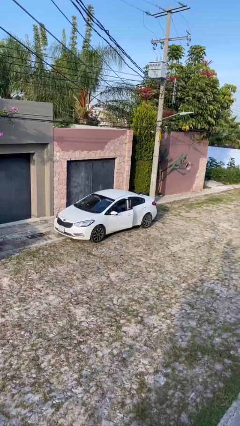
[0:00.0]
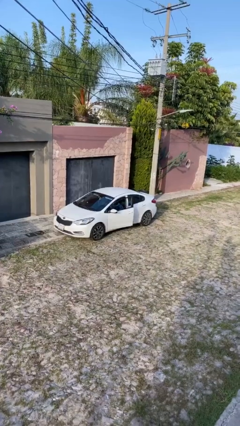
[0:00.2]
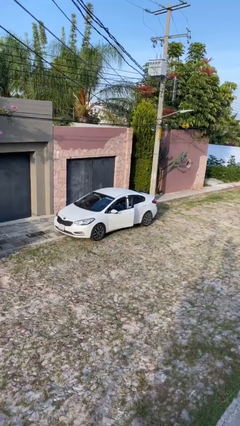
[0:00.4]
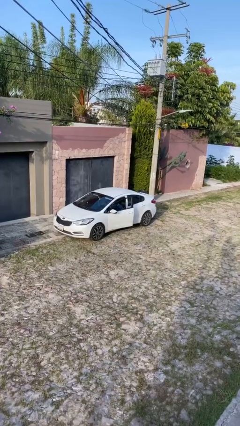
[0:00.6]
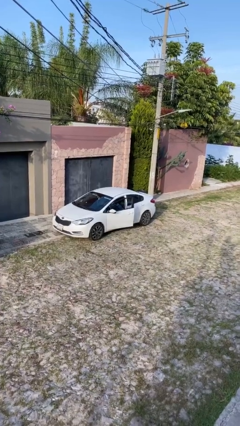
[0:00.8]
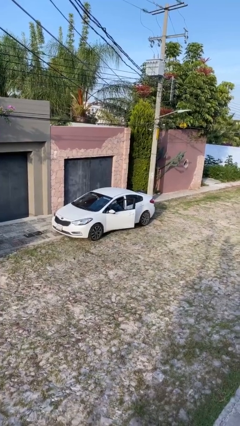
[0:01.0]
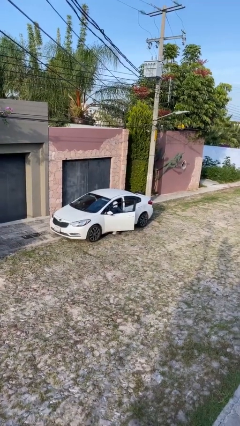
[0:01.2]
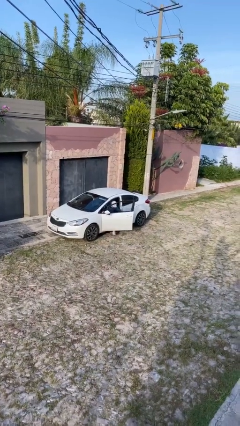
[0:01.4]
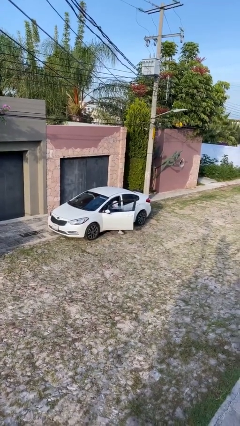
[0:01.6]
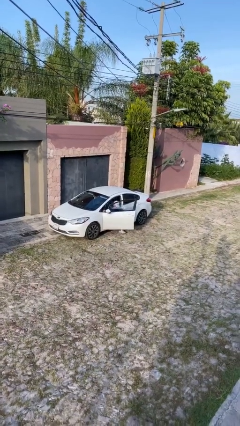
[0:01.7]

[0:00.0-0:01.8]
person opens car door

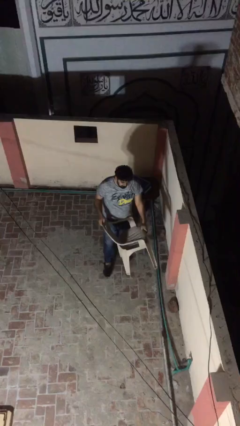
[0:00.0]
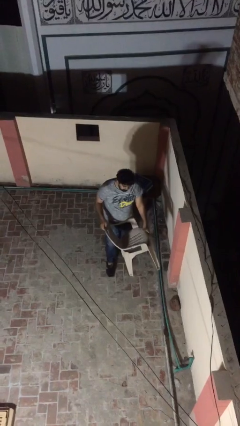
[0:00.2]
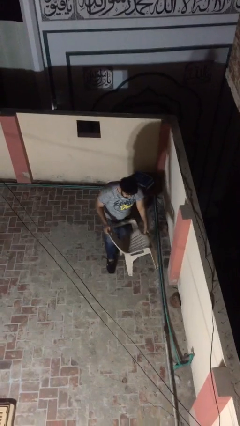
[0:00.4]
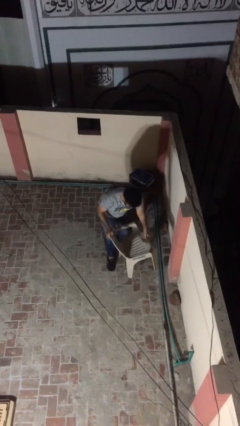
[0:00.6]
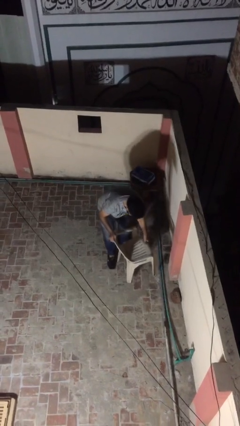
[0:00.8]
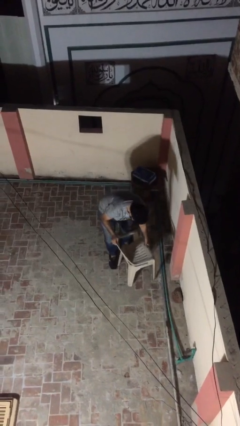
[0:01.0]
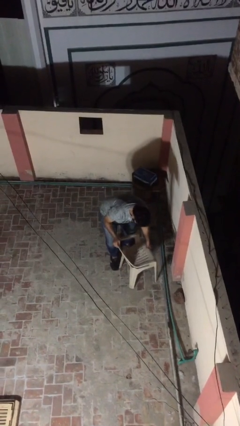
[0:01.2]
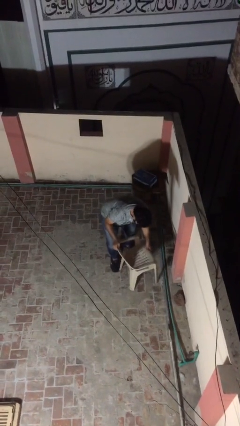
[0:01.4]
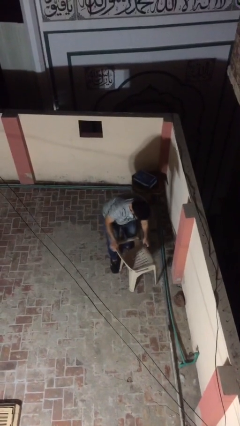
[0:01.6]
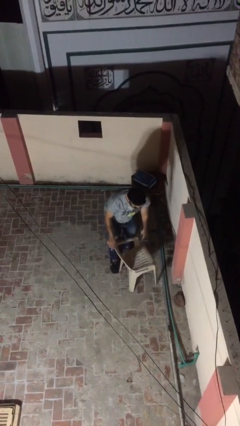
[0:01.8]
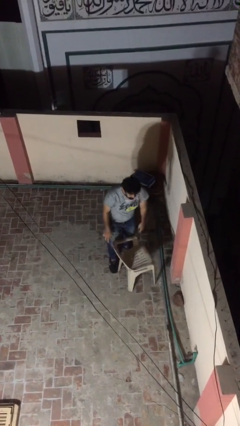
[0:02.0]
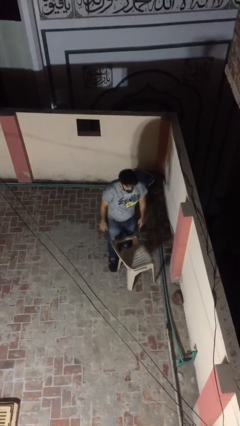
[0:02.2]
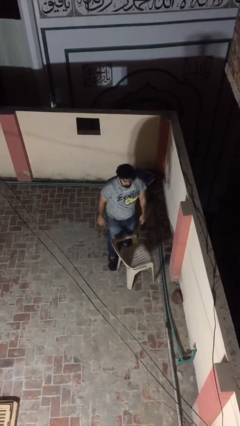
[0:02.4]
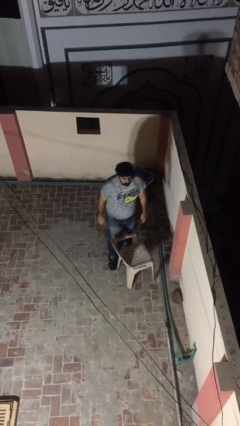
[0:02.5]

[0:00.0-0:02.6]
person puts down object on floor

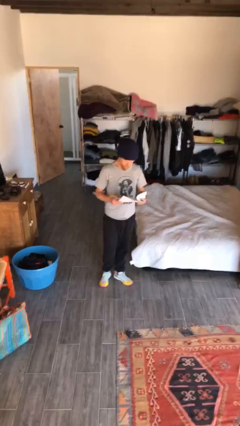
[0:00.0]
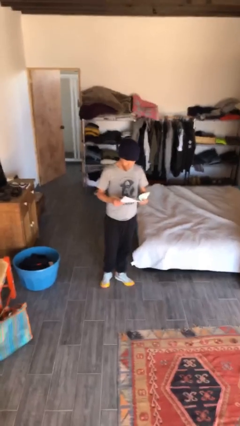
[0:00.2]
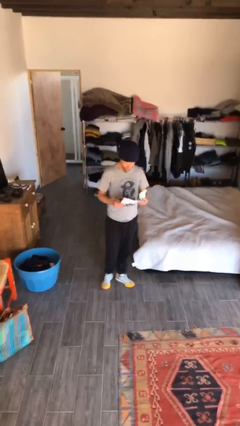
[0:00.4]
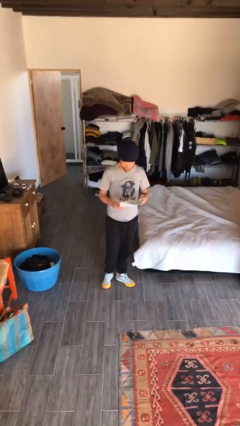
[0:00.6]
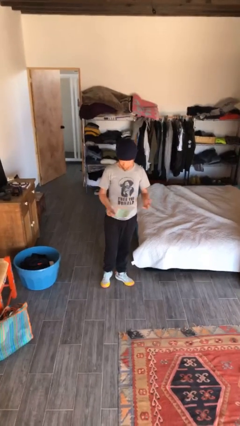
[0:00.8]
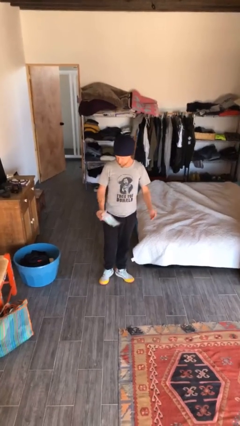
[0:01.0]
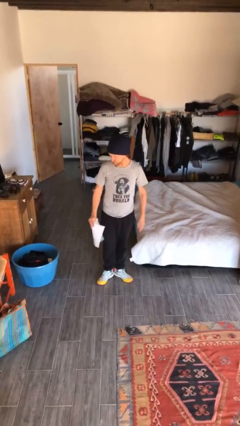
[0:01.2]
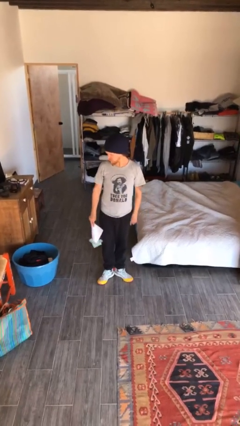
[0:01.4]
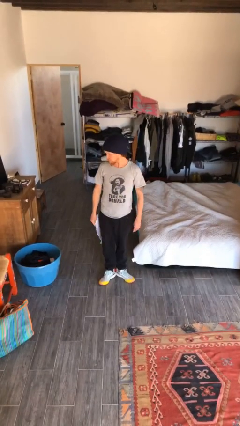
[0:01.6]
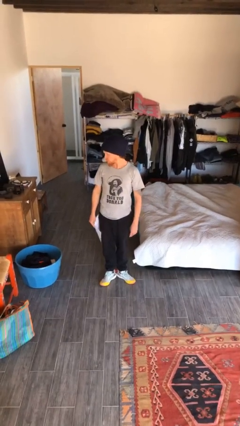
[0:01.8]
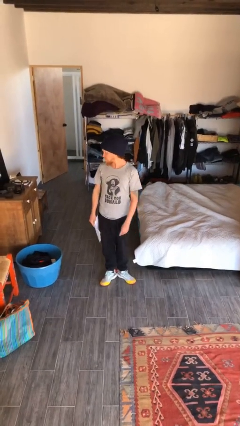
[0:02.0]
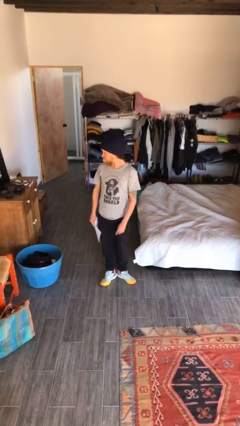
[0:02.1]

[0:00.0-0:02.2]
person reads document

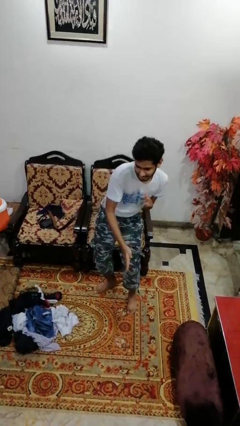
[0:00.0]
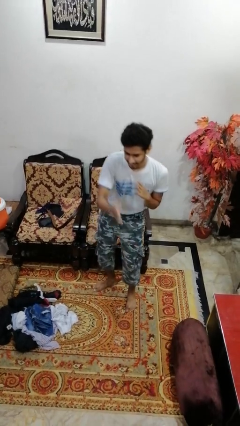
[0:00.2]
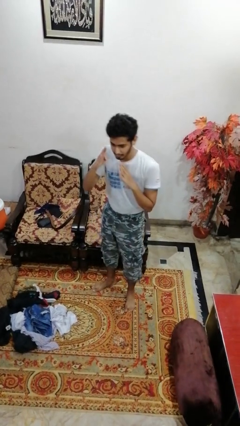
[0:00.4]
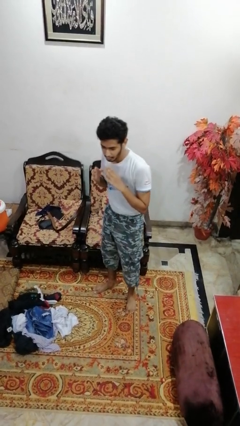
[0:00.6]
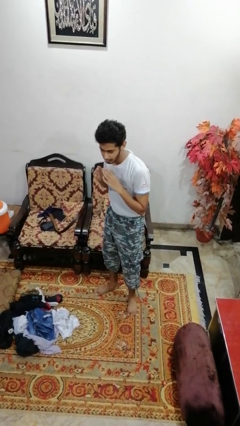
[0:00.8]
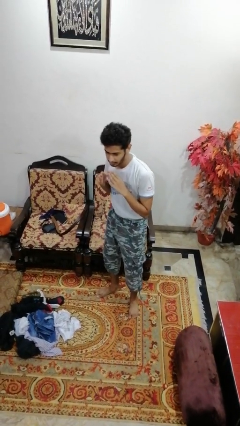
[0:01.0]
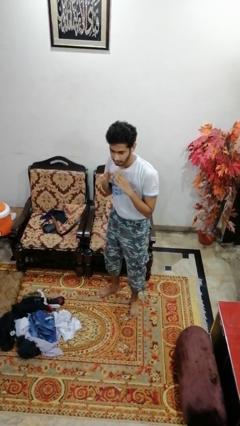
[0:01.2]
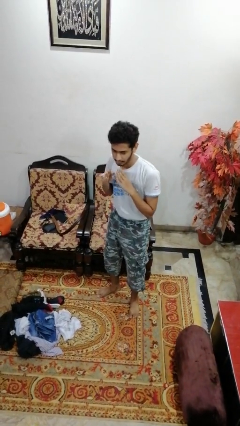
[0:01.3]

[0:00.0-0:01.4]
person karate chop

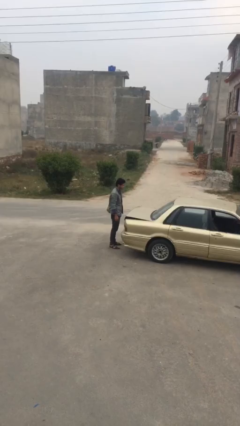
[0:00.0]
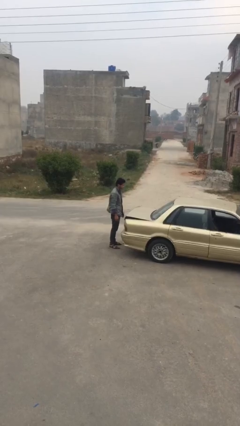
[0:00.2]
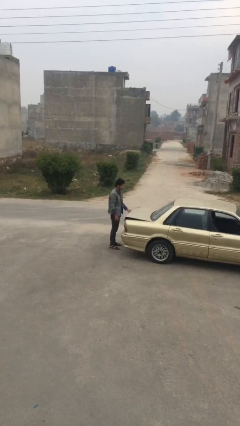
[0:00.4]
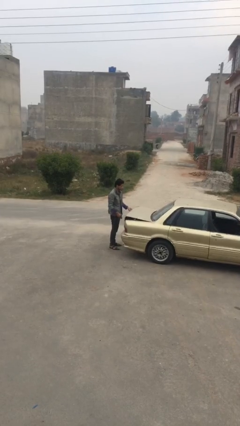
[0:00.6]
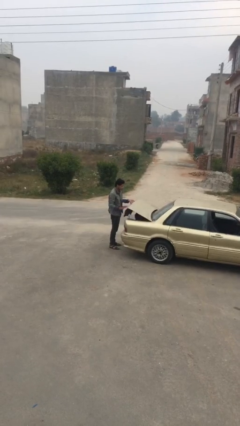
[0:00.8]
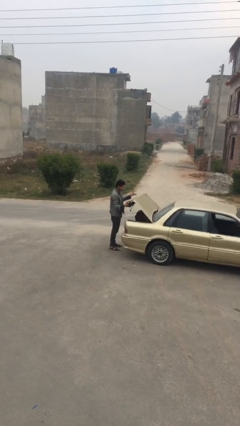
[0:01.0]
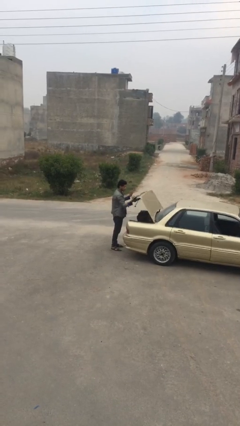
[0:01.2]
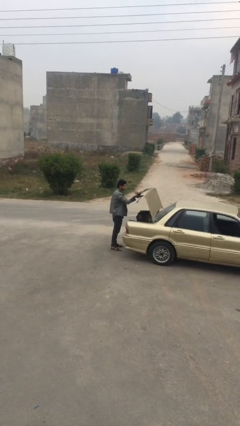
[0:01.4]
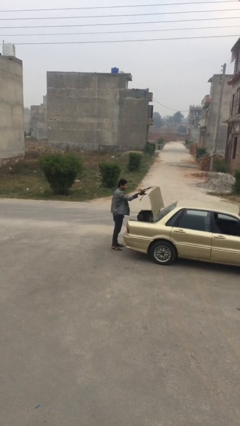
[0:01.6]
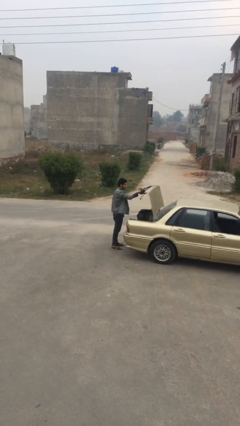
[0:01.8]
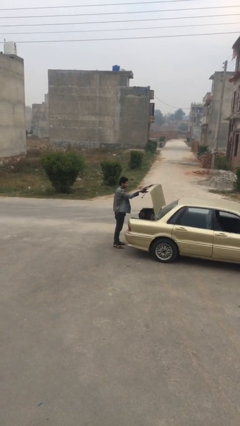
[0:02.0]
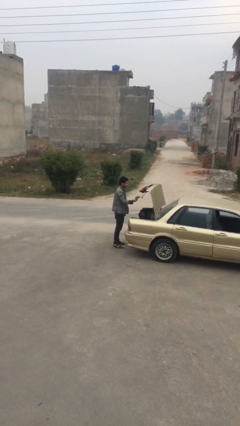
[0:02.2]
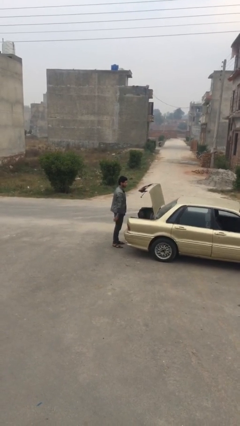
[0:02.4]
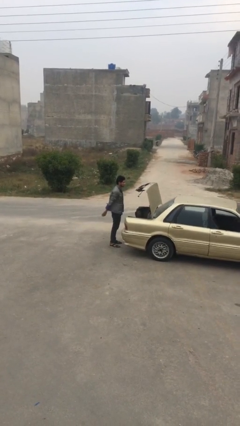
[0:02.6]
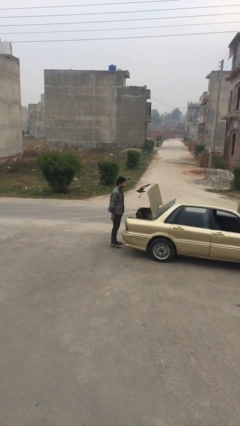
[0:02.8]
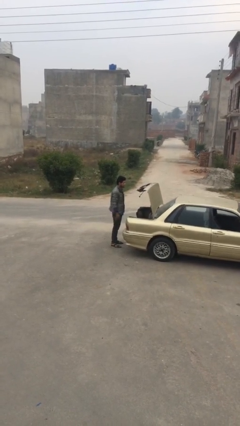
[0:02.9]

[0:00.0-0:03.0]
person opens car trunk

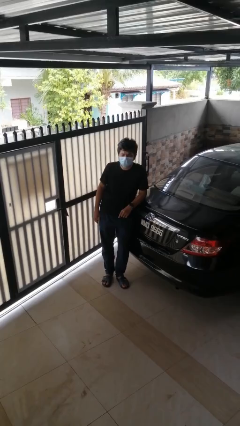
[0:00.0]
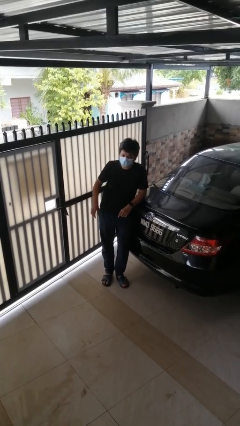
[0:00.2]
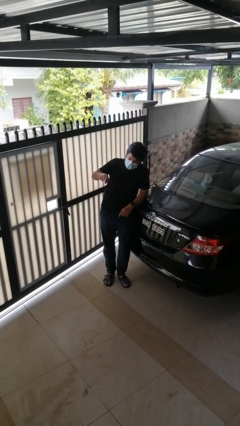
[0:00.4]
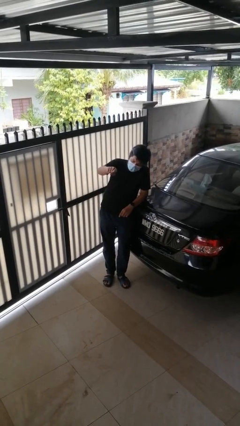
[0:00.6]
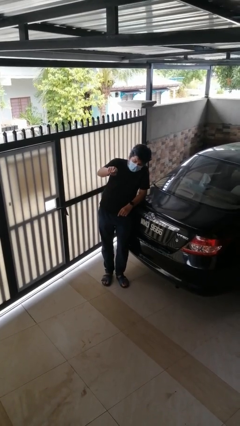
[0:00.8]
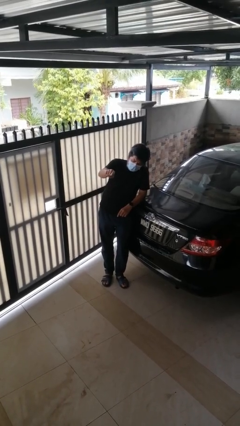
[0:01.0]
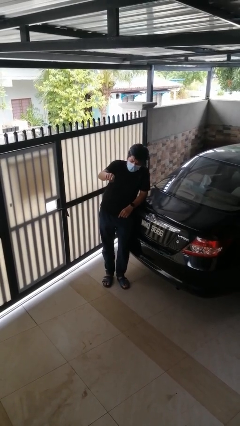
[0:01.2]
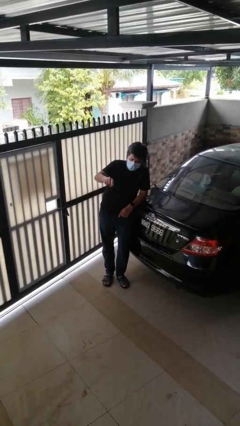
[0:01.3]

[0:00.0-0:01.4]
person points at person

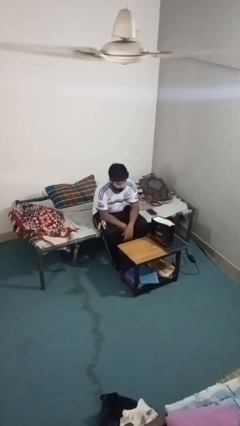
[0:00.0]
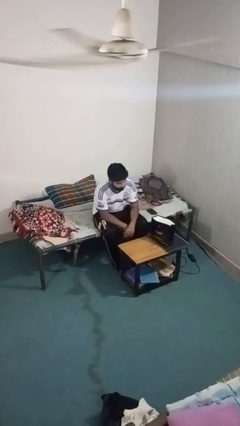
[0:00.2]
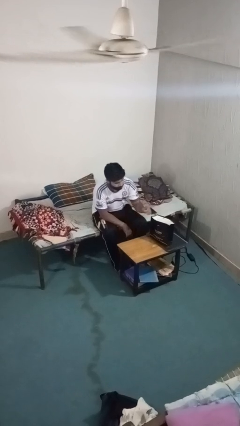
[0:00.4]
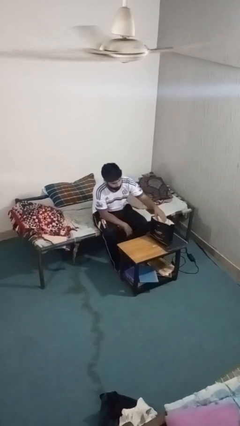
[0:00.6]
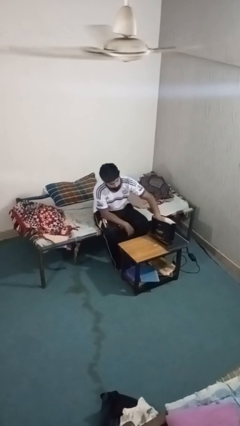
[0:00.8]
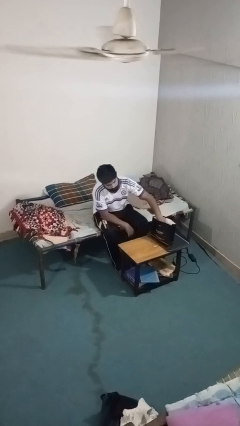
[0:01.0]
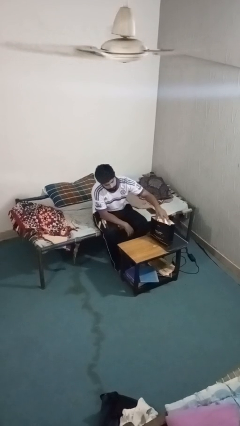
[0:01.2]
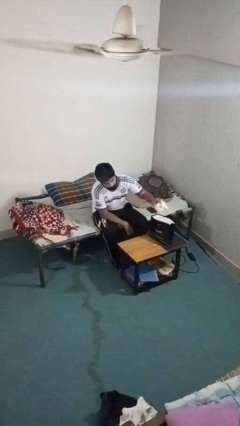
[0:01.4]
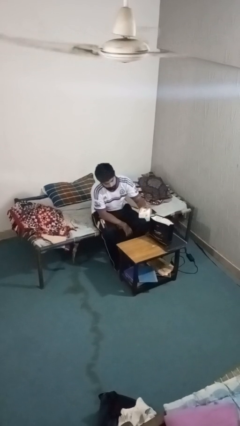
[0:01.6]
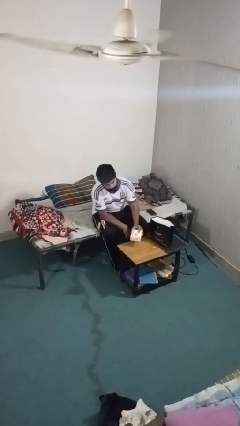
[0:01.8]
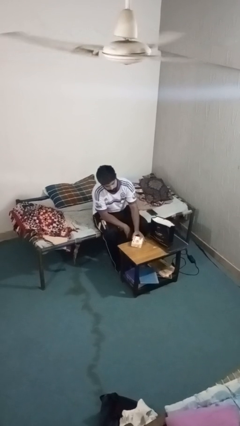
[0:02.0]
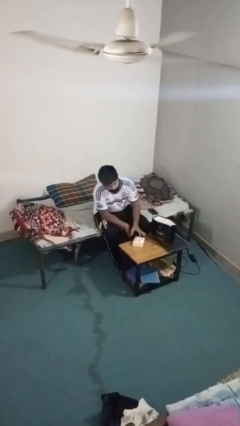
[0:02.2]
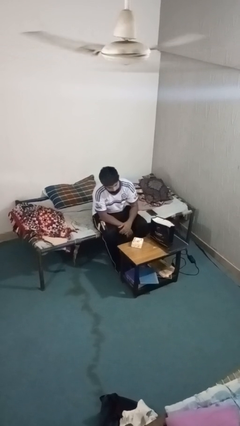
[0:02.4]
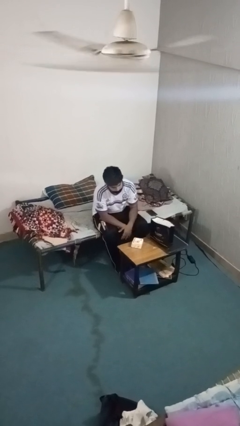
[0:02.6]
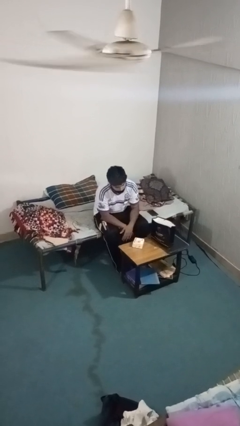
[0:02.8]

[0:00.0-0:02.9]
person takes object from bag

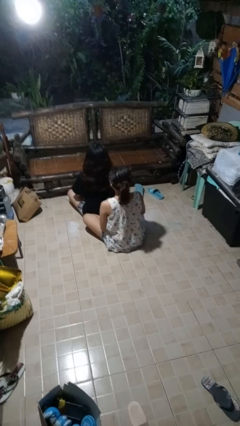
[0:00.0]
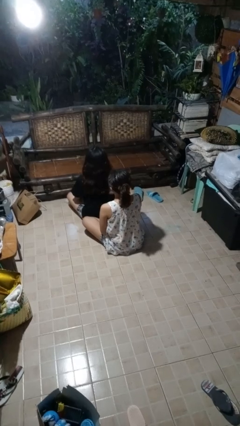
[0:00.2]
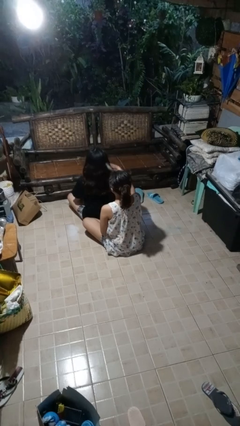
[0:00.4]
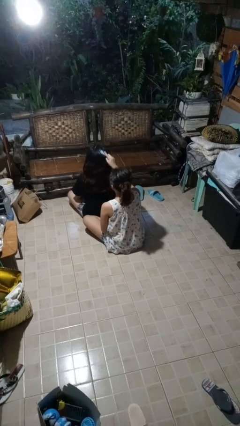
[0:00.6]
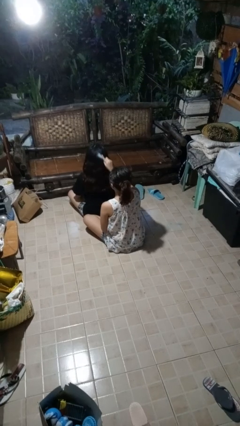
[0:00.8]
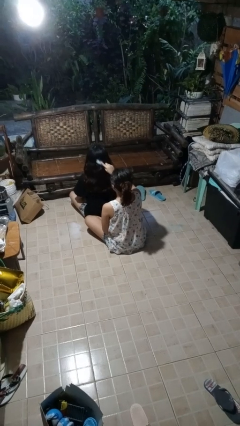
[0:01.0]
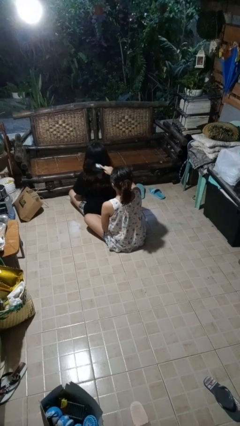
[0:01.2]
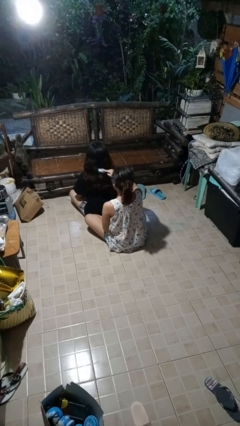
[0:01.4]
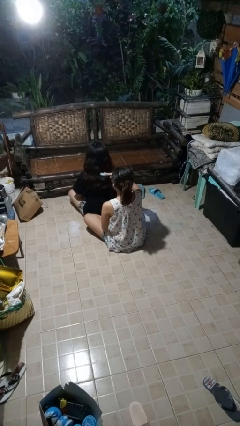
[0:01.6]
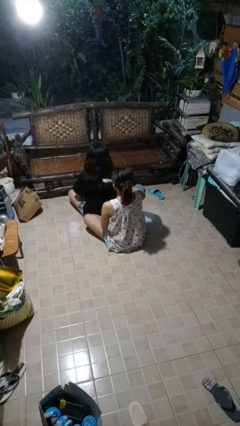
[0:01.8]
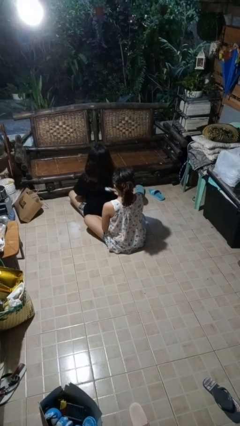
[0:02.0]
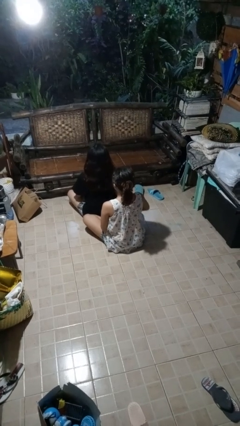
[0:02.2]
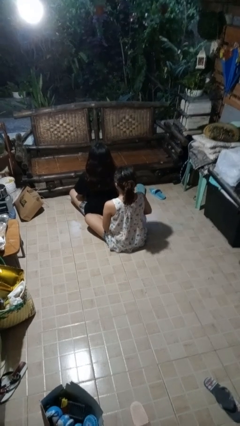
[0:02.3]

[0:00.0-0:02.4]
person brushes hair of person
